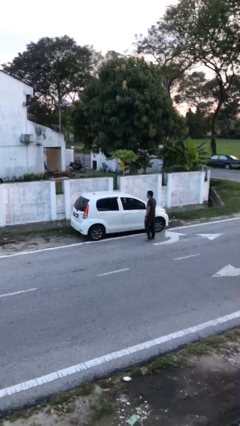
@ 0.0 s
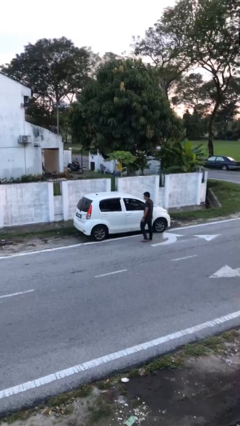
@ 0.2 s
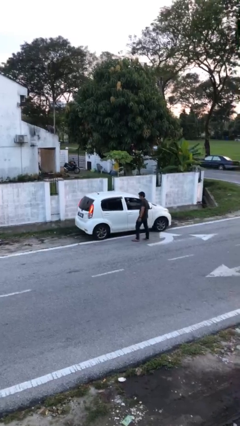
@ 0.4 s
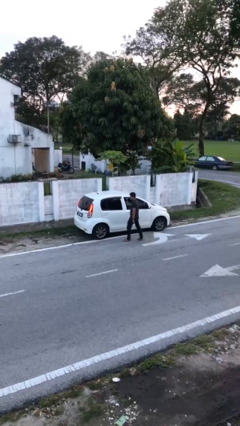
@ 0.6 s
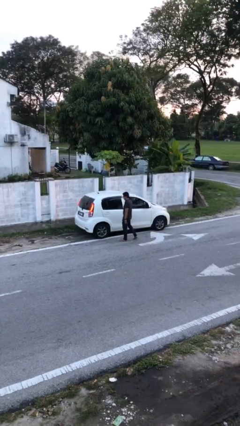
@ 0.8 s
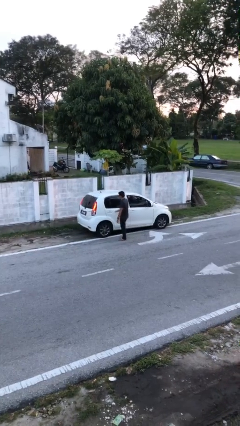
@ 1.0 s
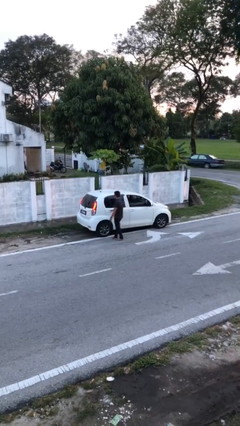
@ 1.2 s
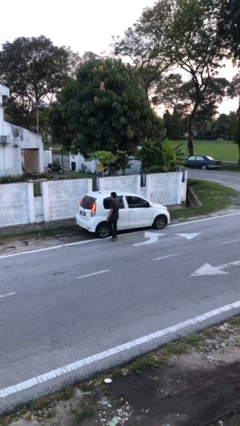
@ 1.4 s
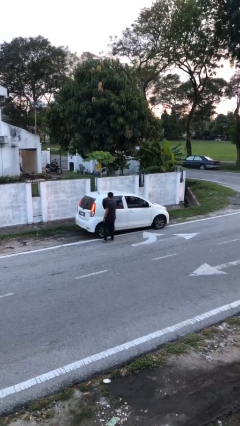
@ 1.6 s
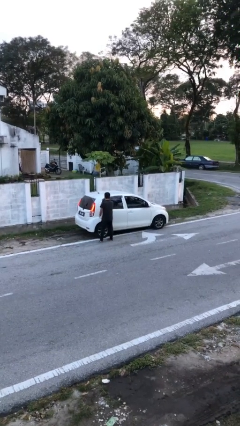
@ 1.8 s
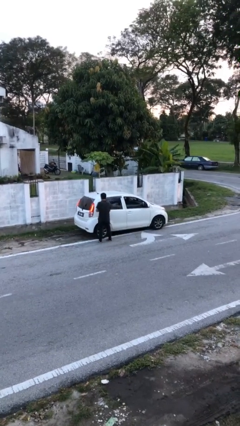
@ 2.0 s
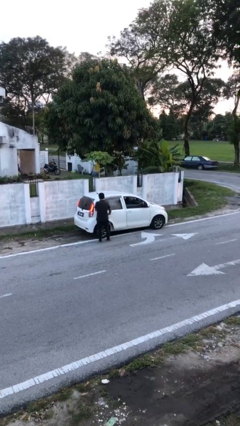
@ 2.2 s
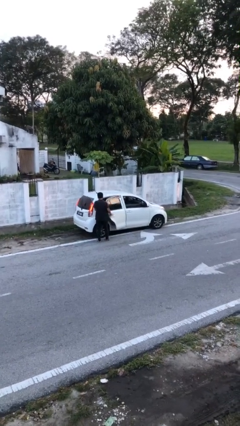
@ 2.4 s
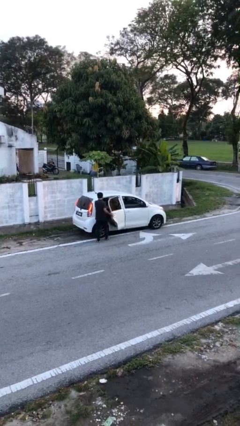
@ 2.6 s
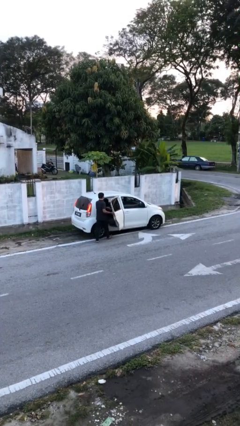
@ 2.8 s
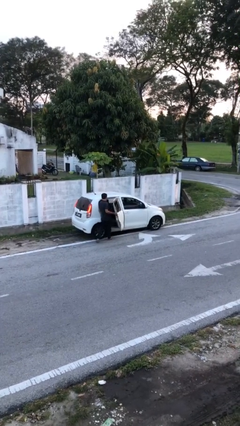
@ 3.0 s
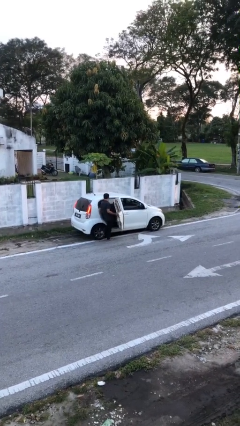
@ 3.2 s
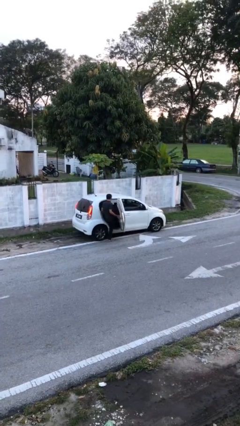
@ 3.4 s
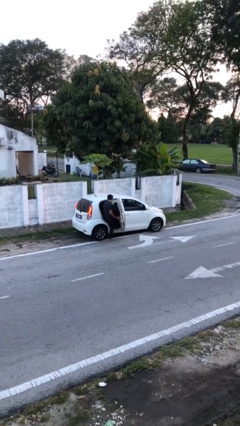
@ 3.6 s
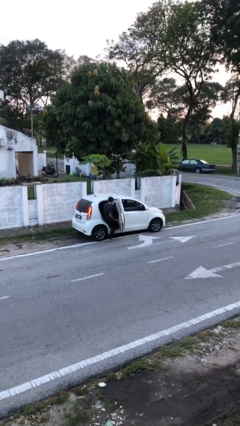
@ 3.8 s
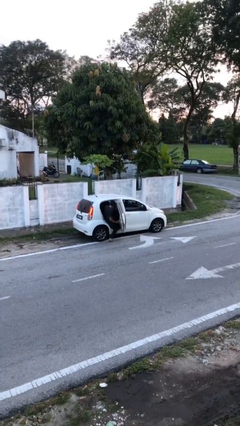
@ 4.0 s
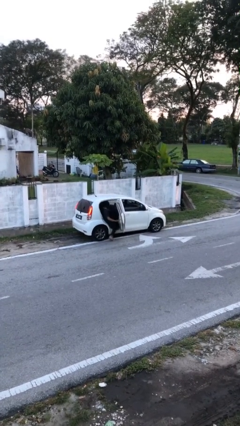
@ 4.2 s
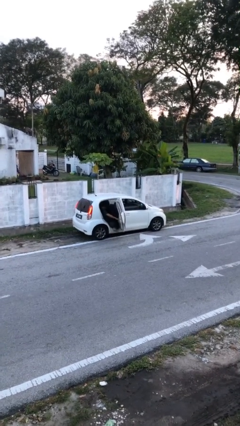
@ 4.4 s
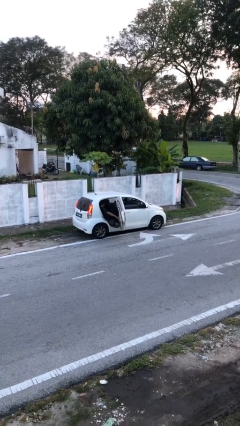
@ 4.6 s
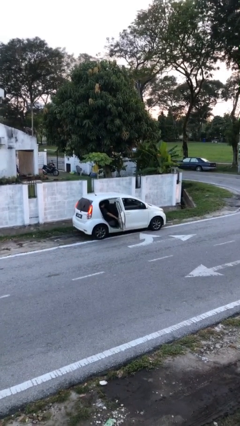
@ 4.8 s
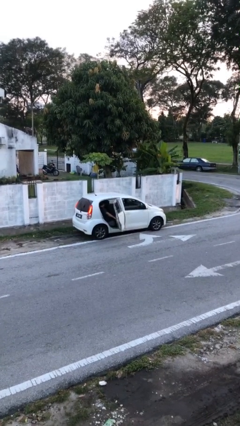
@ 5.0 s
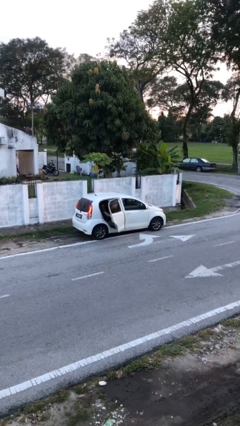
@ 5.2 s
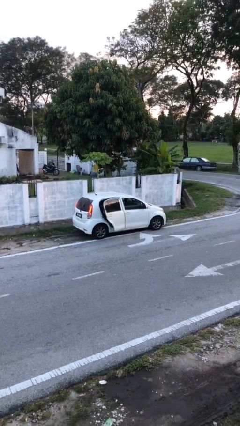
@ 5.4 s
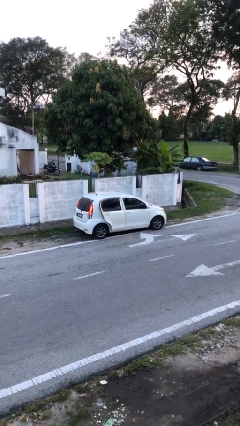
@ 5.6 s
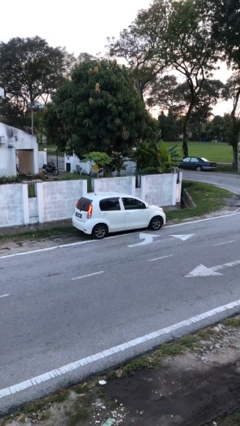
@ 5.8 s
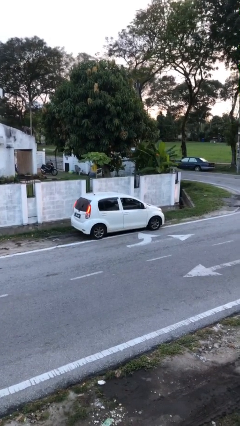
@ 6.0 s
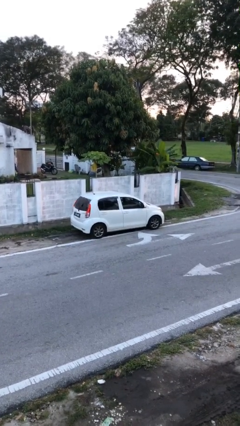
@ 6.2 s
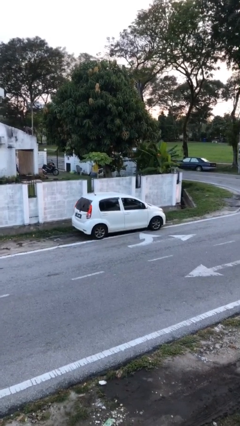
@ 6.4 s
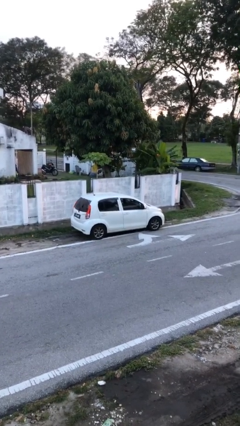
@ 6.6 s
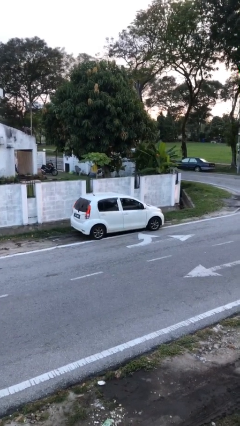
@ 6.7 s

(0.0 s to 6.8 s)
car picks up person

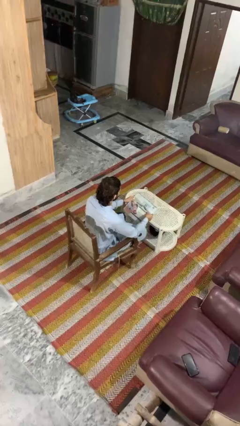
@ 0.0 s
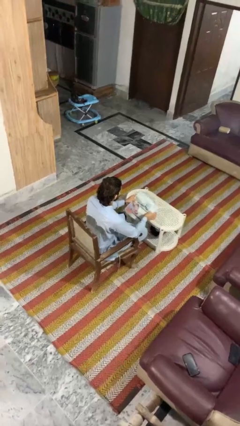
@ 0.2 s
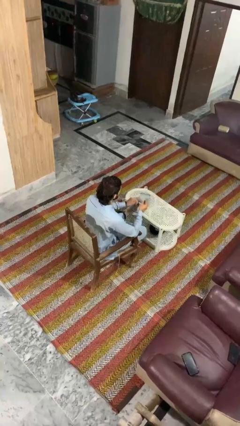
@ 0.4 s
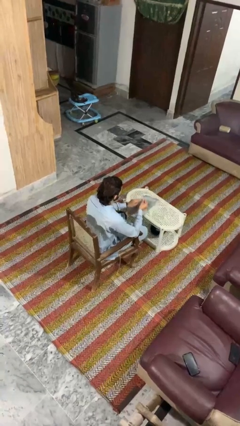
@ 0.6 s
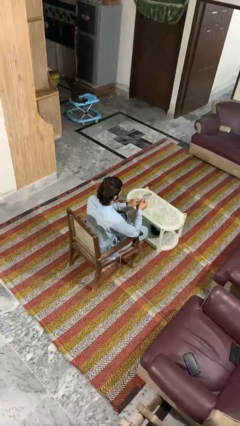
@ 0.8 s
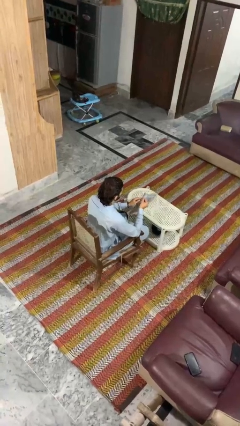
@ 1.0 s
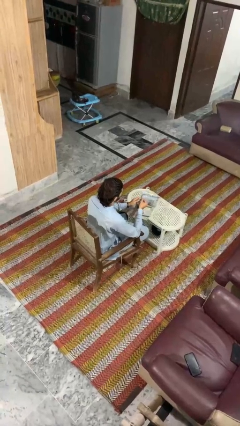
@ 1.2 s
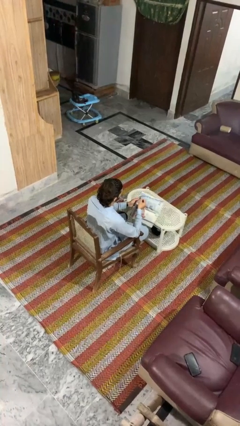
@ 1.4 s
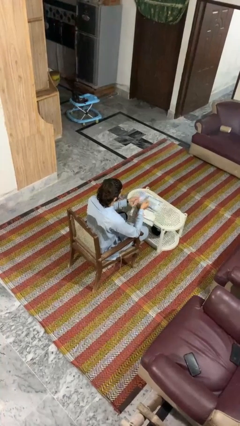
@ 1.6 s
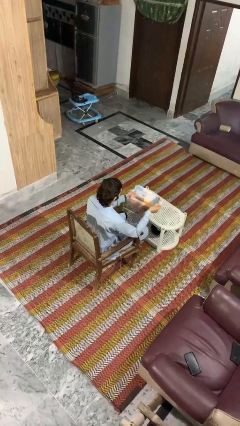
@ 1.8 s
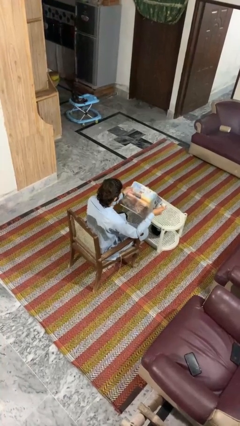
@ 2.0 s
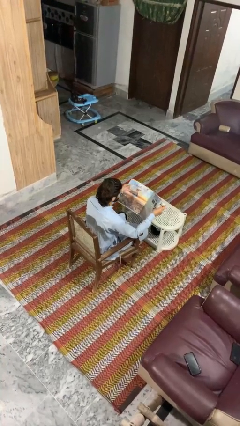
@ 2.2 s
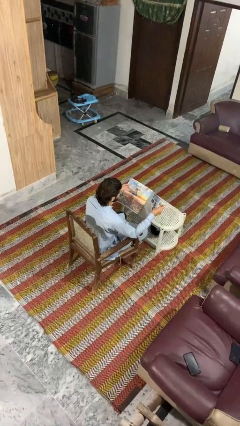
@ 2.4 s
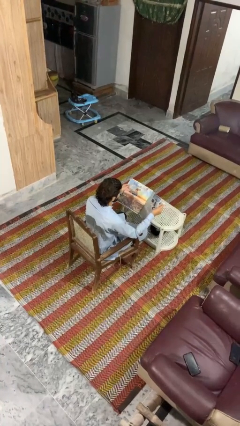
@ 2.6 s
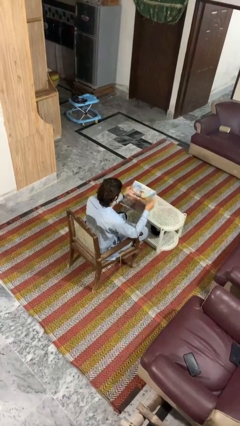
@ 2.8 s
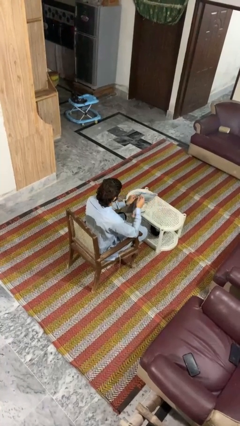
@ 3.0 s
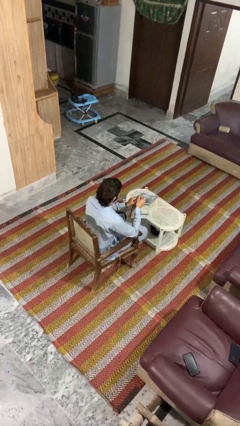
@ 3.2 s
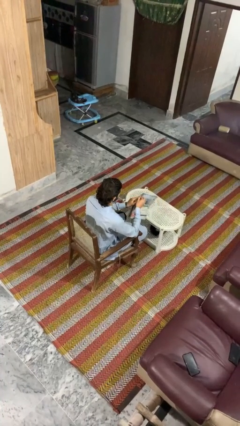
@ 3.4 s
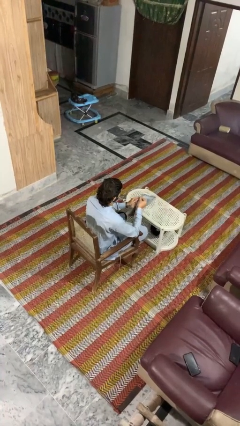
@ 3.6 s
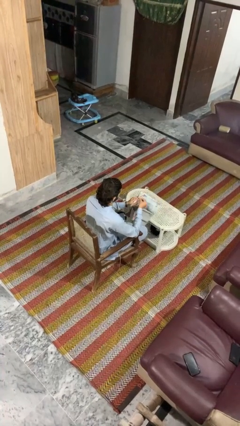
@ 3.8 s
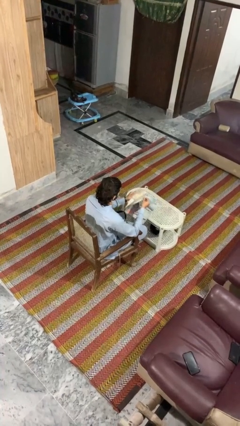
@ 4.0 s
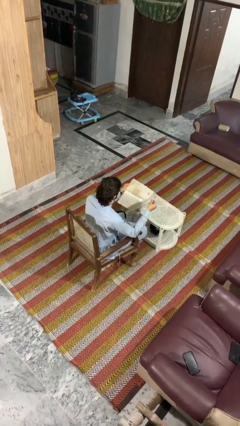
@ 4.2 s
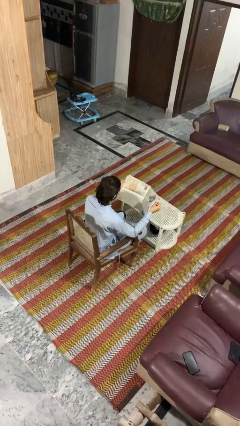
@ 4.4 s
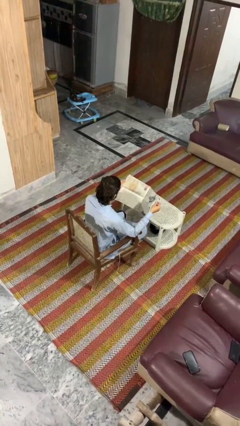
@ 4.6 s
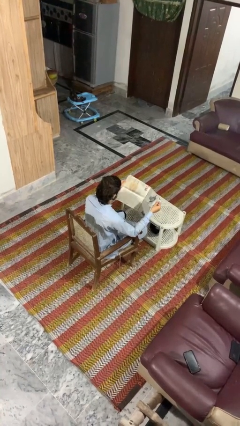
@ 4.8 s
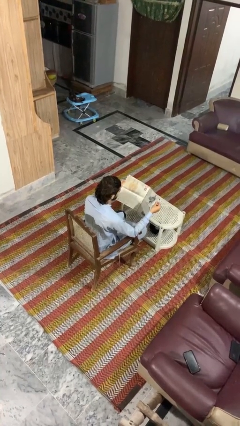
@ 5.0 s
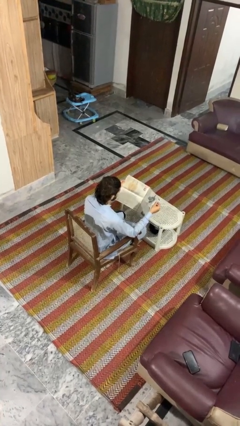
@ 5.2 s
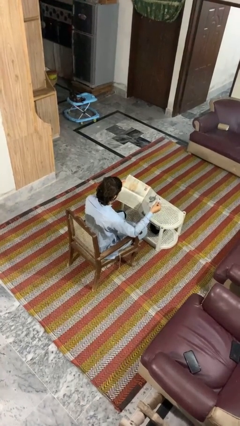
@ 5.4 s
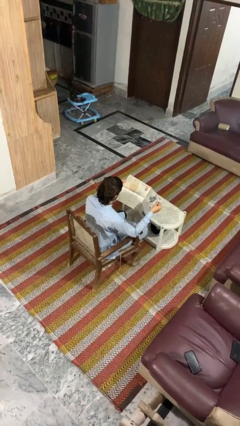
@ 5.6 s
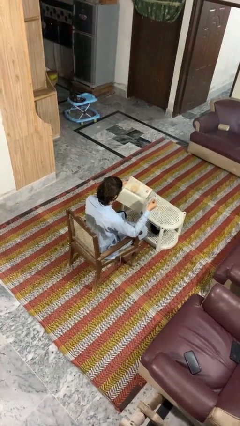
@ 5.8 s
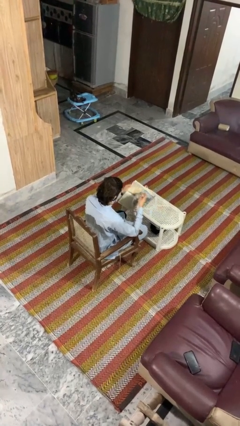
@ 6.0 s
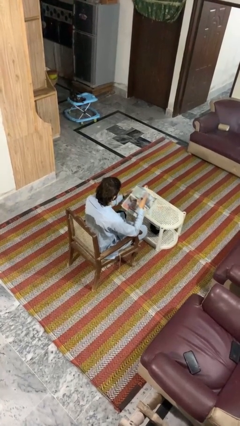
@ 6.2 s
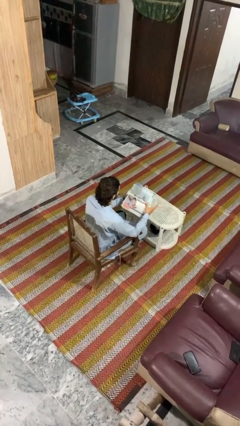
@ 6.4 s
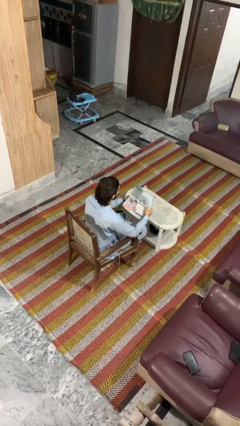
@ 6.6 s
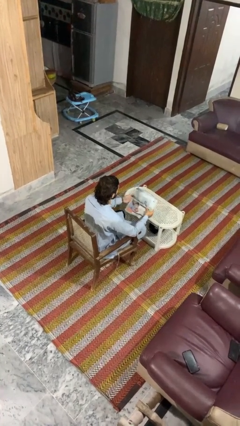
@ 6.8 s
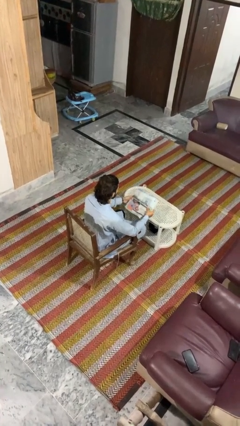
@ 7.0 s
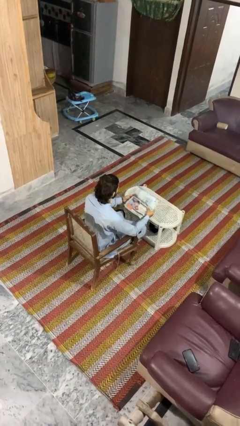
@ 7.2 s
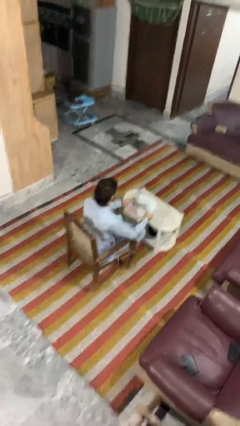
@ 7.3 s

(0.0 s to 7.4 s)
person reads magazine

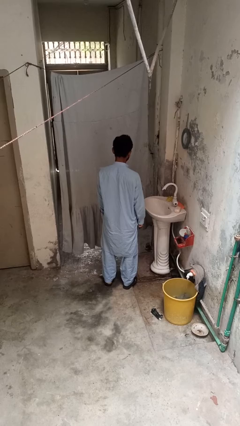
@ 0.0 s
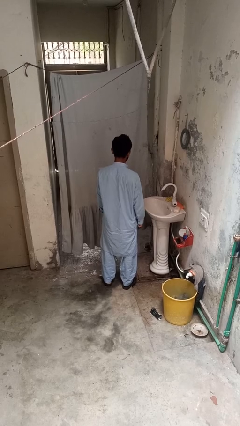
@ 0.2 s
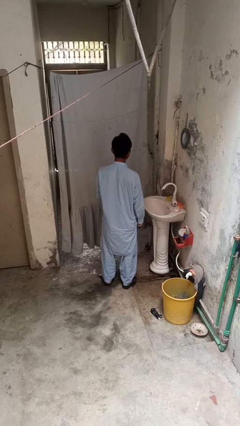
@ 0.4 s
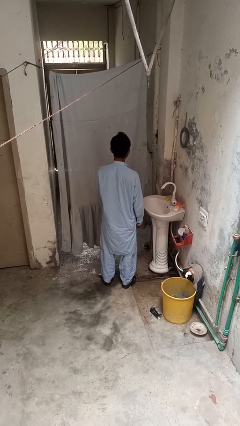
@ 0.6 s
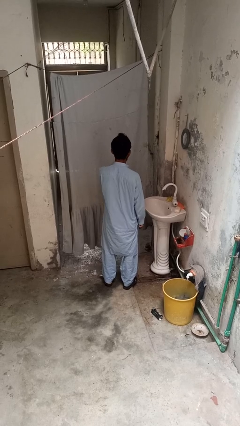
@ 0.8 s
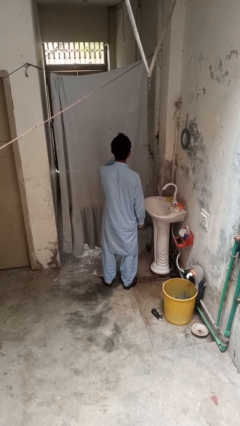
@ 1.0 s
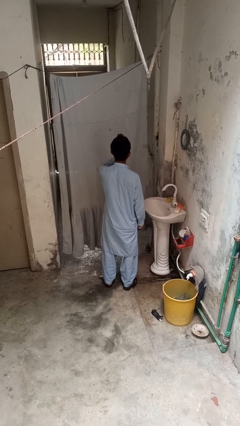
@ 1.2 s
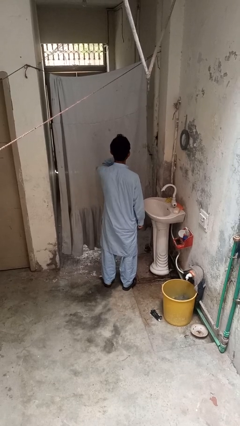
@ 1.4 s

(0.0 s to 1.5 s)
person yawns

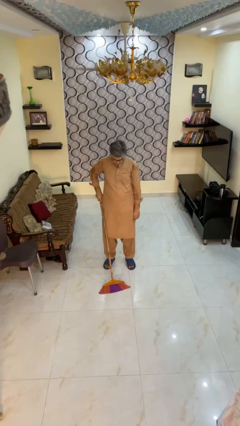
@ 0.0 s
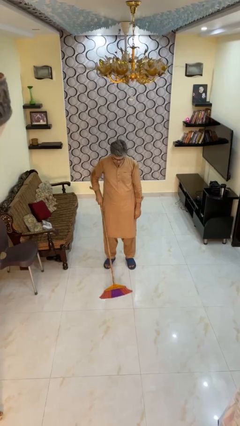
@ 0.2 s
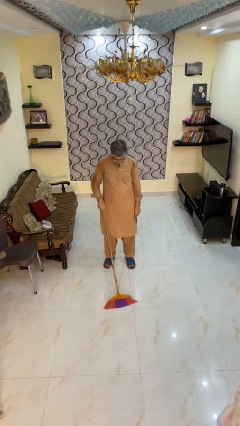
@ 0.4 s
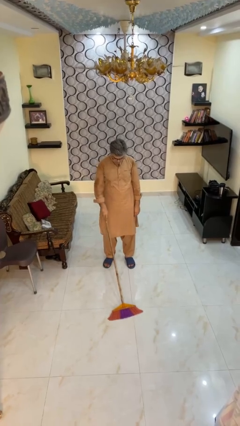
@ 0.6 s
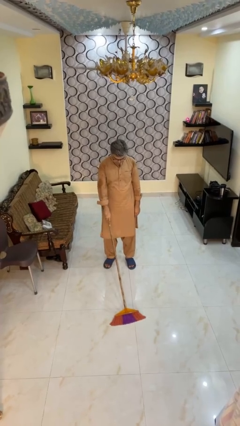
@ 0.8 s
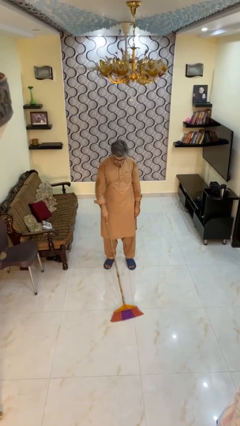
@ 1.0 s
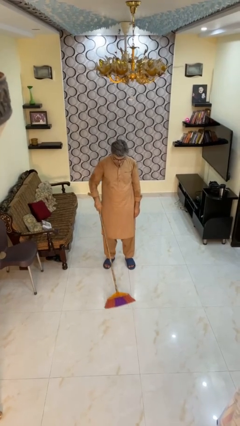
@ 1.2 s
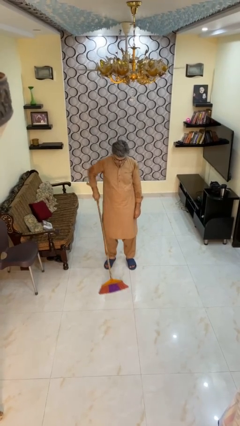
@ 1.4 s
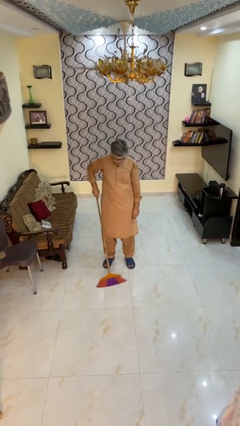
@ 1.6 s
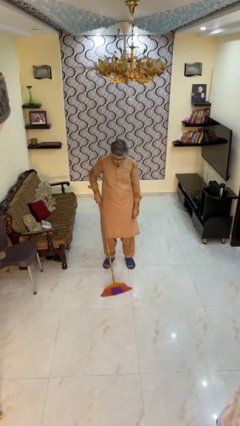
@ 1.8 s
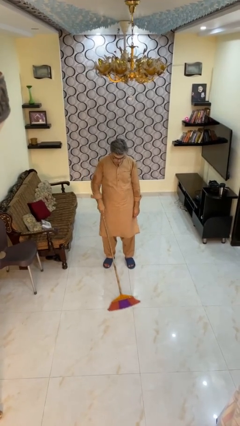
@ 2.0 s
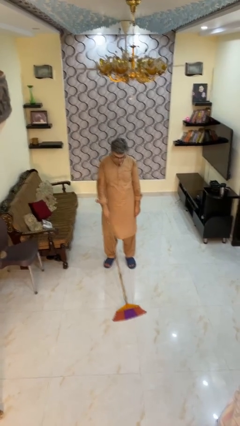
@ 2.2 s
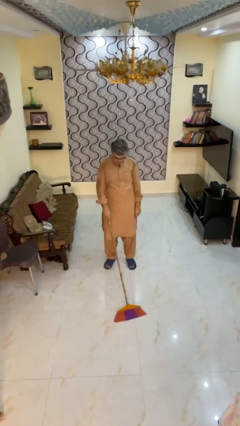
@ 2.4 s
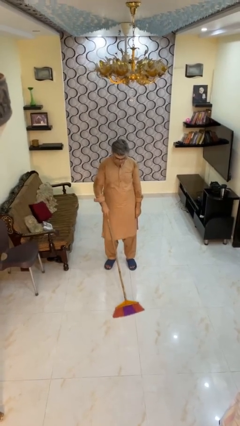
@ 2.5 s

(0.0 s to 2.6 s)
person mops
